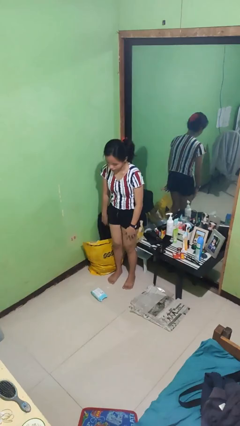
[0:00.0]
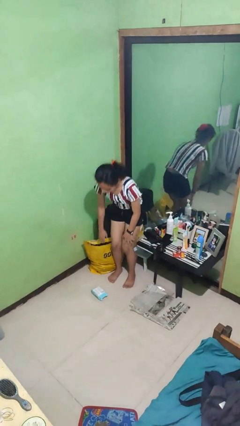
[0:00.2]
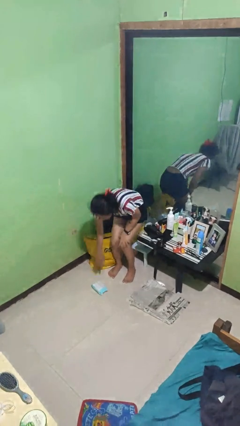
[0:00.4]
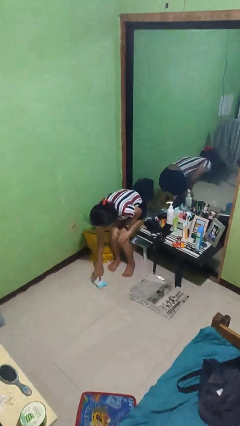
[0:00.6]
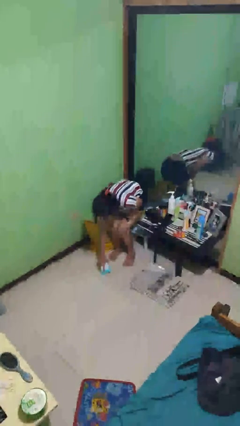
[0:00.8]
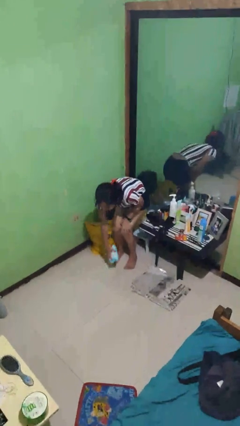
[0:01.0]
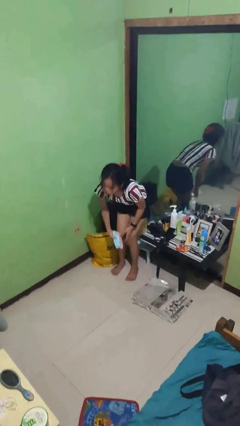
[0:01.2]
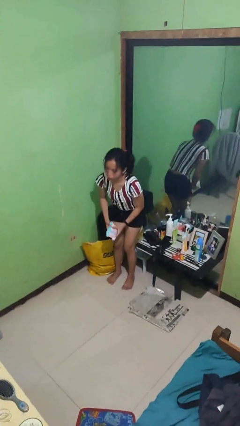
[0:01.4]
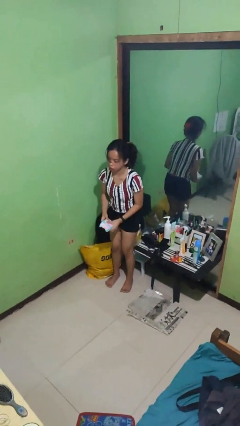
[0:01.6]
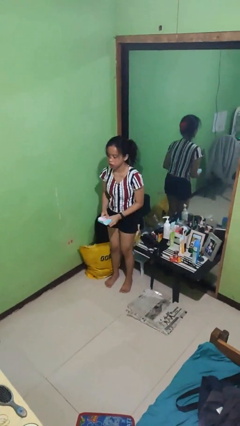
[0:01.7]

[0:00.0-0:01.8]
person picks up object from floor

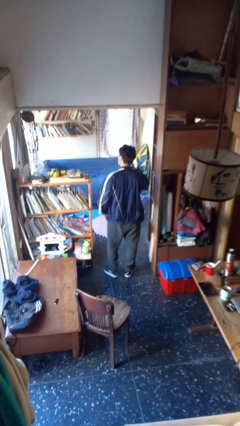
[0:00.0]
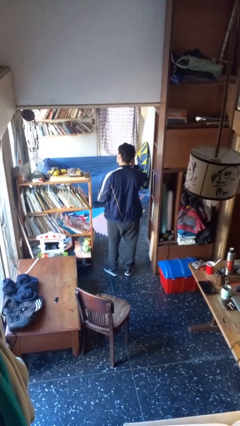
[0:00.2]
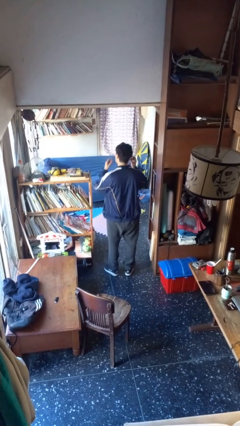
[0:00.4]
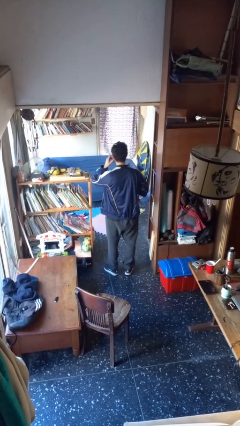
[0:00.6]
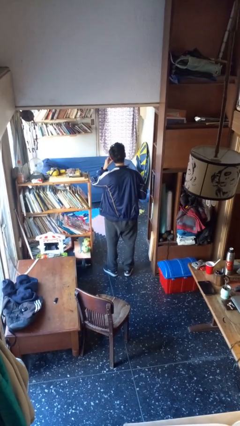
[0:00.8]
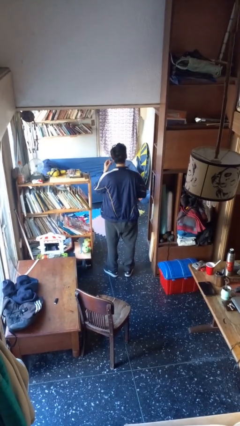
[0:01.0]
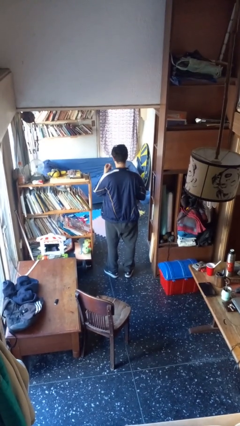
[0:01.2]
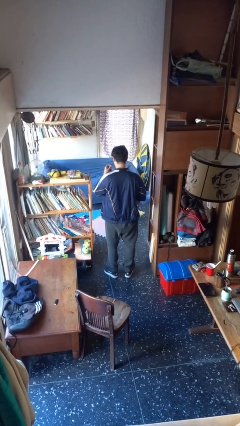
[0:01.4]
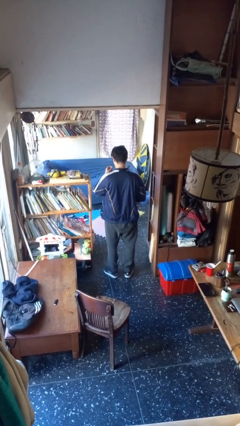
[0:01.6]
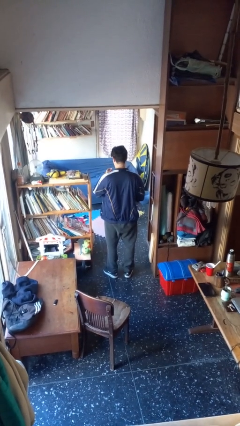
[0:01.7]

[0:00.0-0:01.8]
person takes off headphones

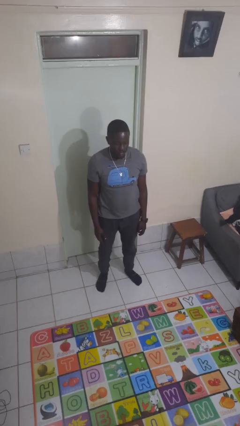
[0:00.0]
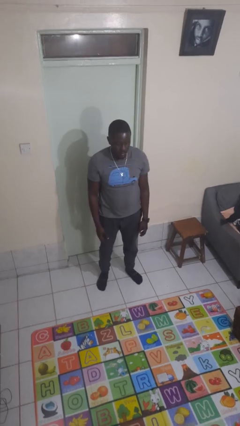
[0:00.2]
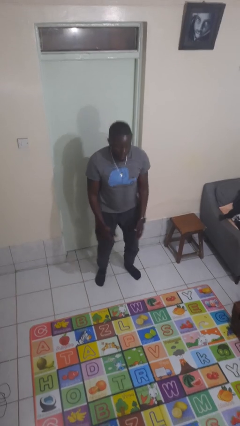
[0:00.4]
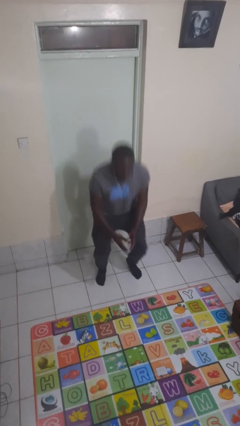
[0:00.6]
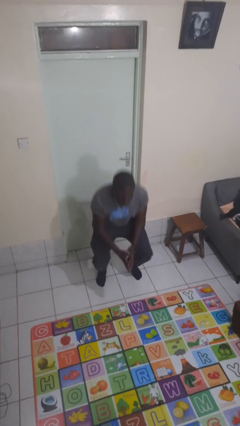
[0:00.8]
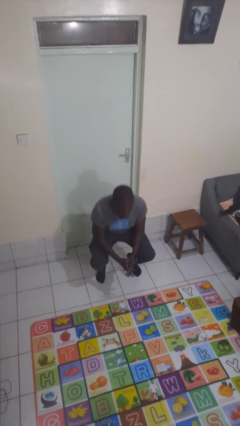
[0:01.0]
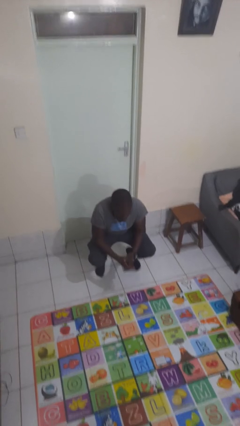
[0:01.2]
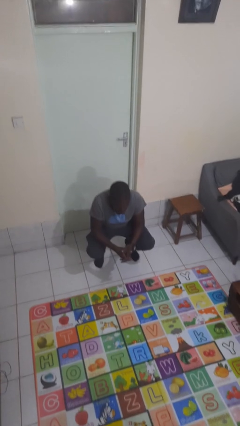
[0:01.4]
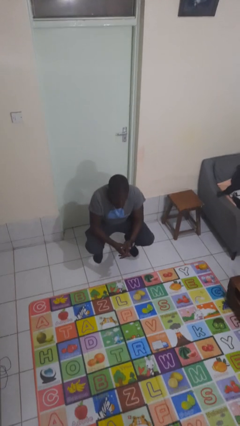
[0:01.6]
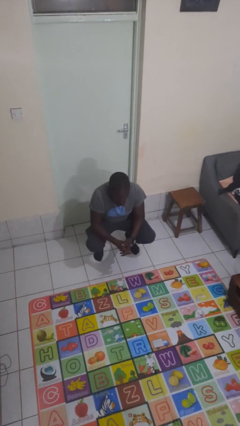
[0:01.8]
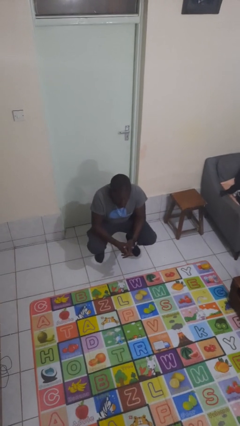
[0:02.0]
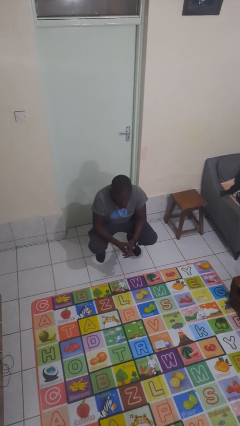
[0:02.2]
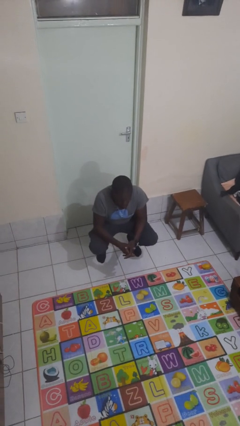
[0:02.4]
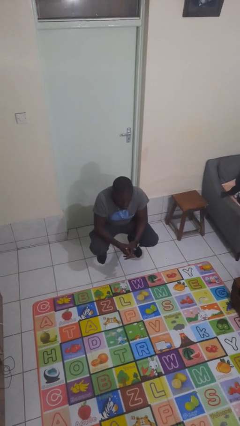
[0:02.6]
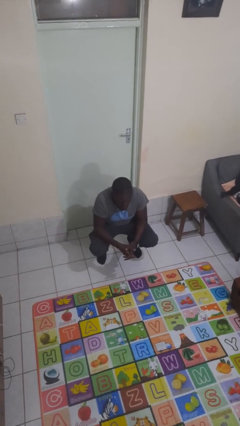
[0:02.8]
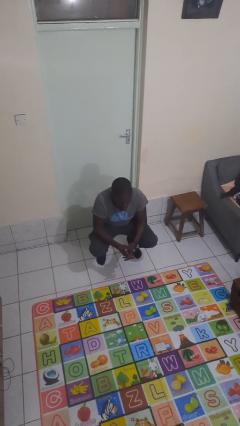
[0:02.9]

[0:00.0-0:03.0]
person squats

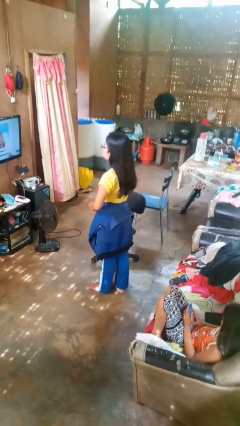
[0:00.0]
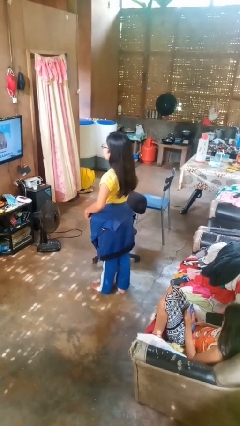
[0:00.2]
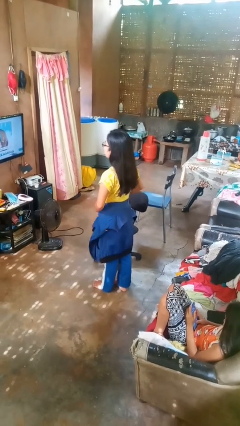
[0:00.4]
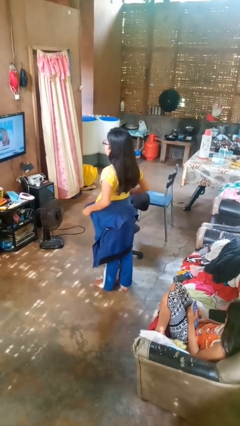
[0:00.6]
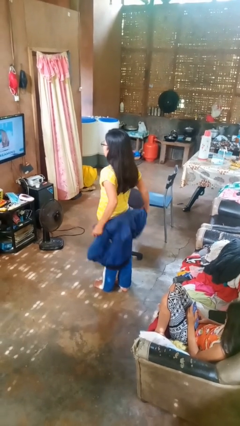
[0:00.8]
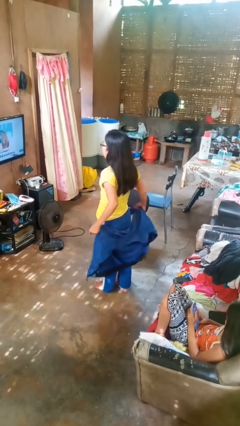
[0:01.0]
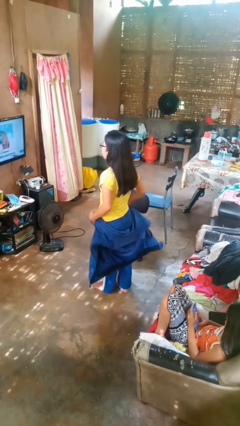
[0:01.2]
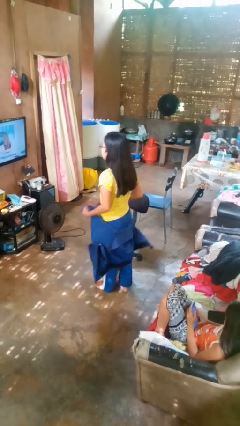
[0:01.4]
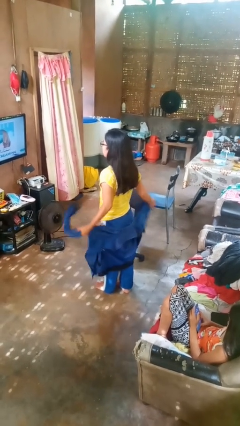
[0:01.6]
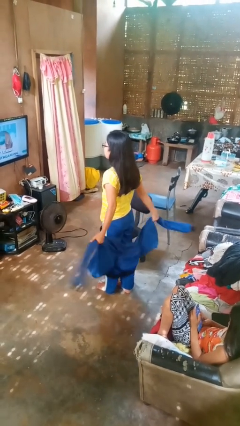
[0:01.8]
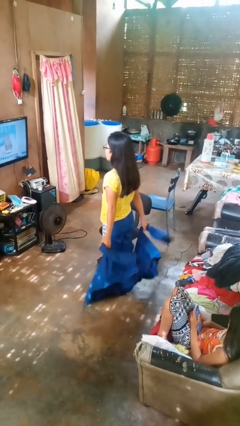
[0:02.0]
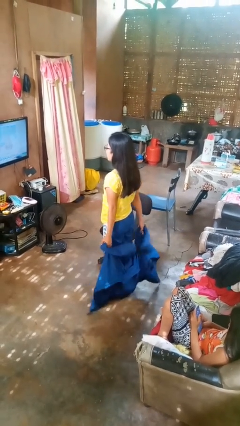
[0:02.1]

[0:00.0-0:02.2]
person unties jacket around waist

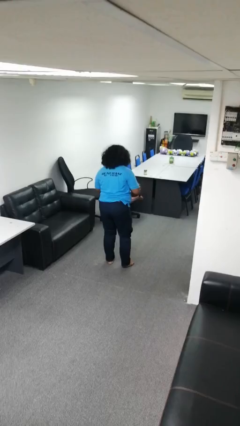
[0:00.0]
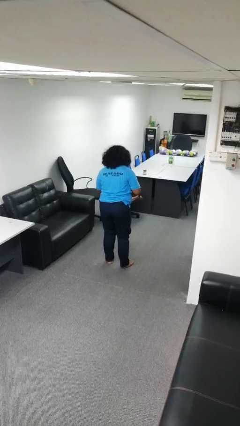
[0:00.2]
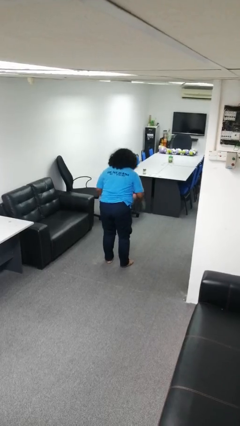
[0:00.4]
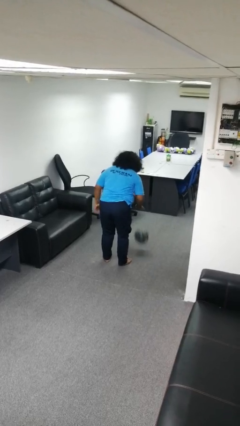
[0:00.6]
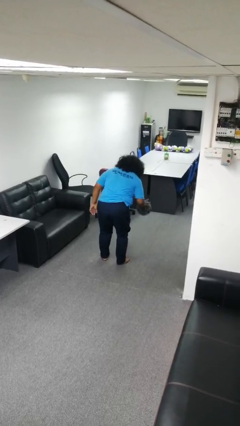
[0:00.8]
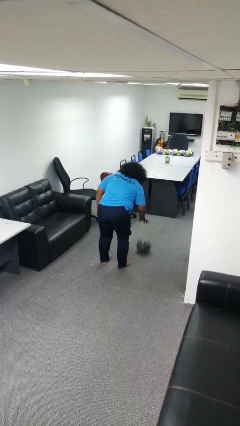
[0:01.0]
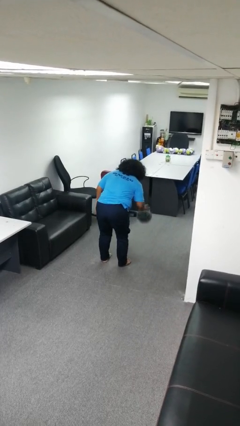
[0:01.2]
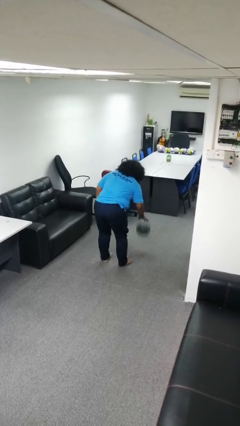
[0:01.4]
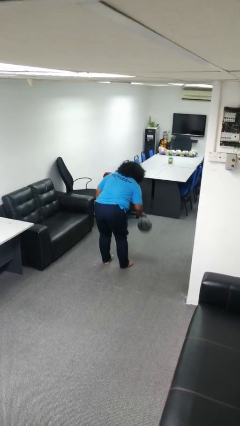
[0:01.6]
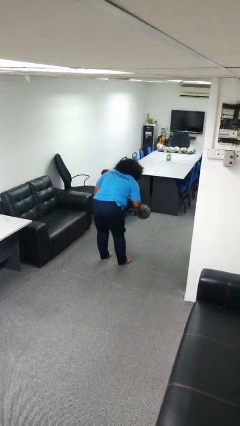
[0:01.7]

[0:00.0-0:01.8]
person bounces ball on floor

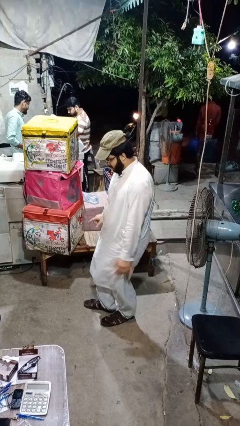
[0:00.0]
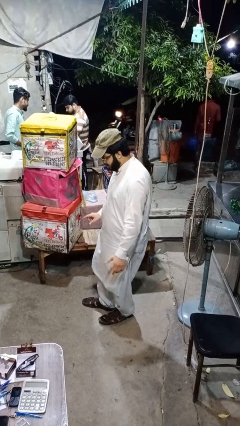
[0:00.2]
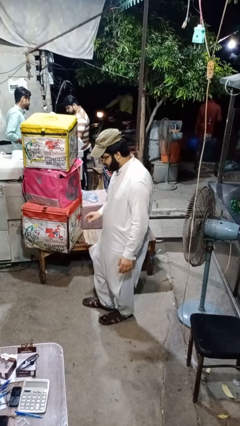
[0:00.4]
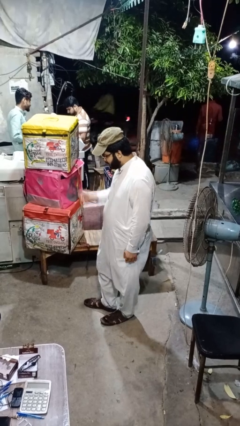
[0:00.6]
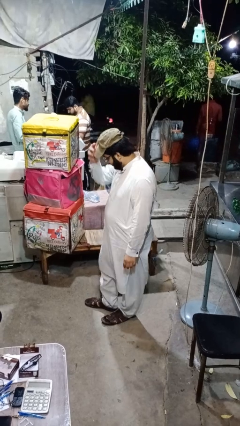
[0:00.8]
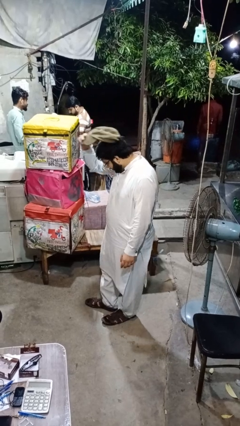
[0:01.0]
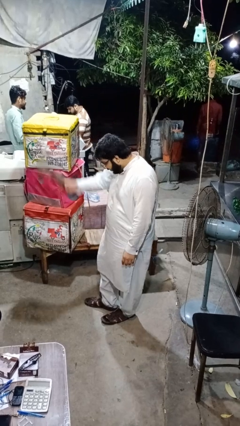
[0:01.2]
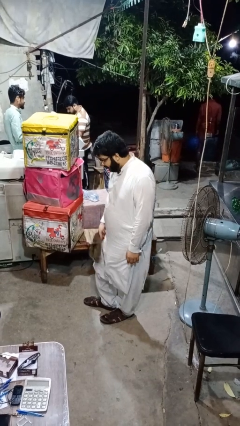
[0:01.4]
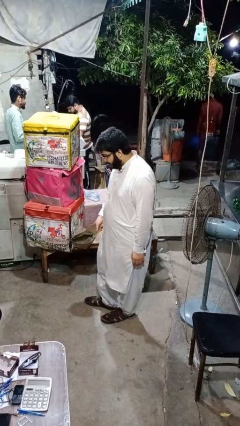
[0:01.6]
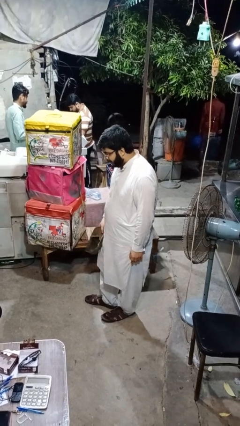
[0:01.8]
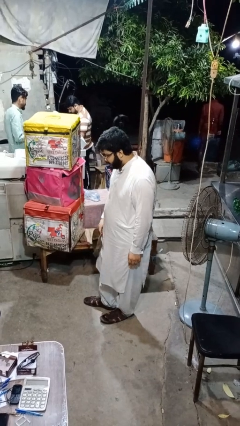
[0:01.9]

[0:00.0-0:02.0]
person takes off hat

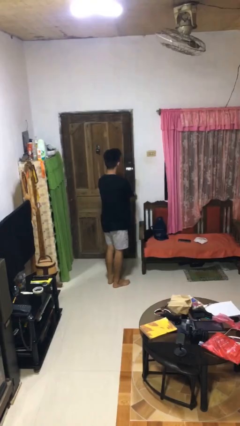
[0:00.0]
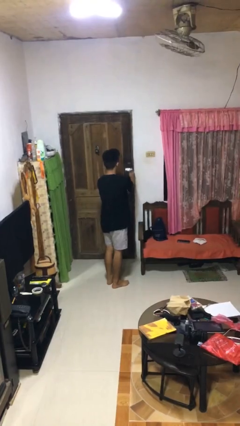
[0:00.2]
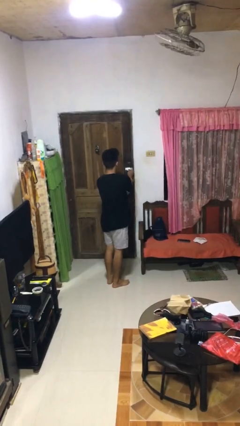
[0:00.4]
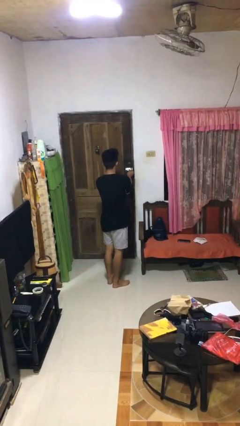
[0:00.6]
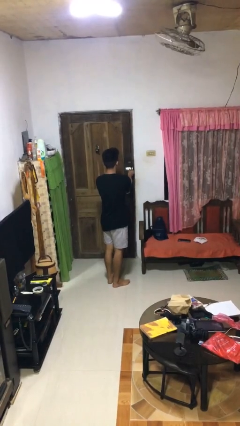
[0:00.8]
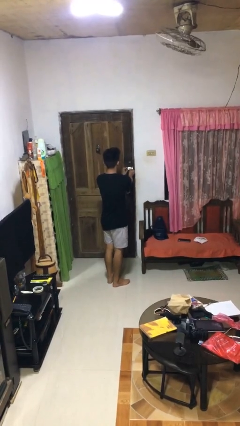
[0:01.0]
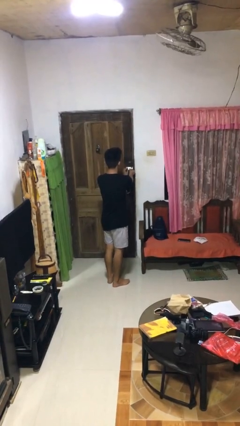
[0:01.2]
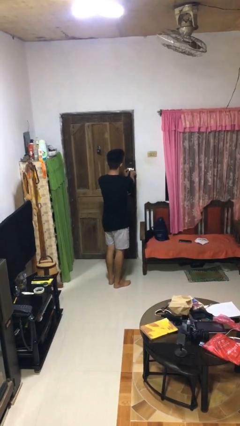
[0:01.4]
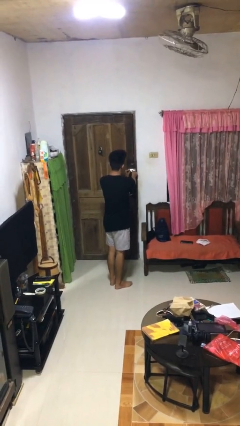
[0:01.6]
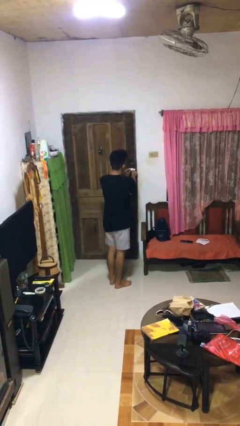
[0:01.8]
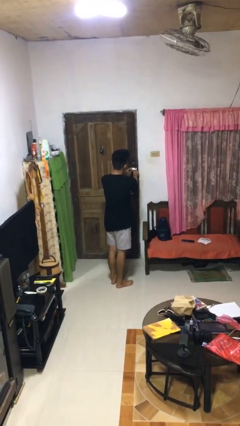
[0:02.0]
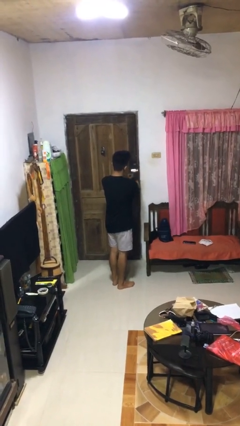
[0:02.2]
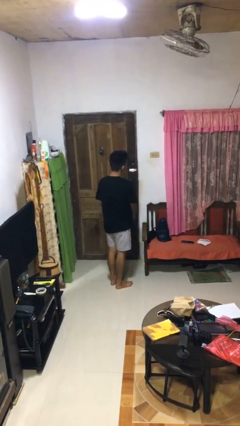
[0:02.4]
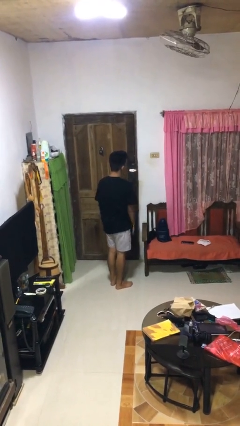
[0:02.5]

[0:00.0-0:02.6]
person locks door with keys

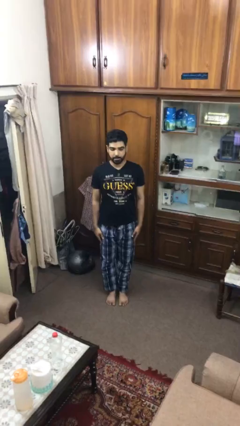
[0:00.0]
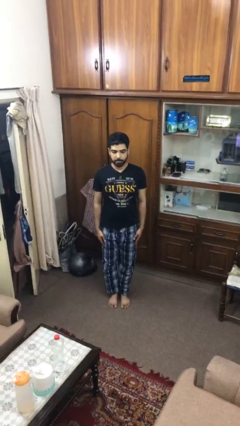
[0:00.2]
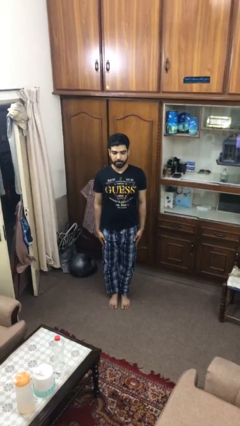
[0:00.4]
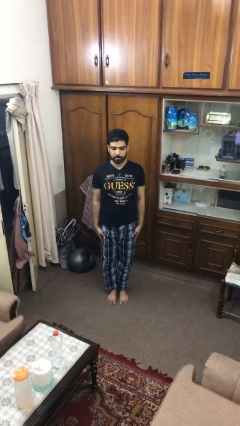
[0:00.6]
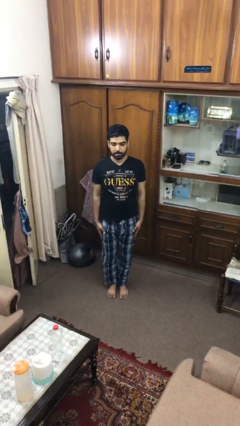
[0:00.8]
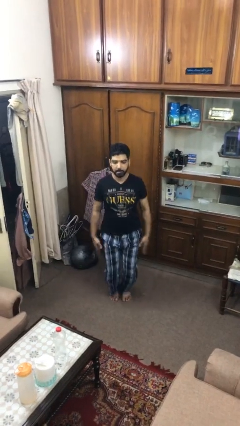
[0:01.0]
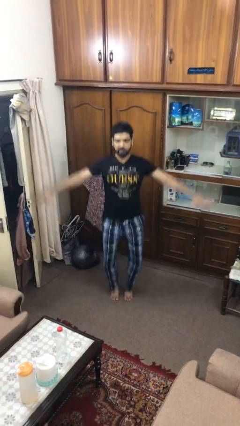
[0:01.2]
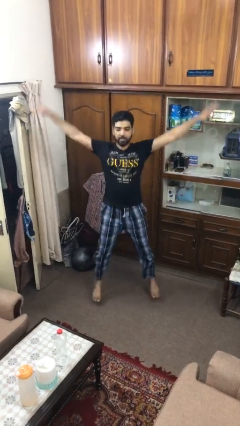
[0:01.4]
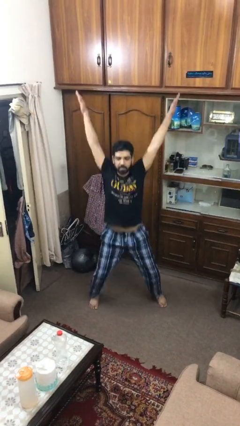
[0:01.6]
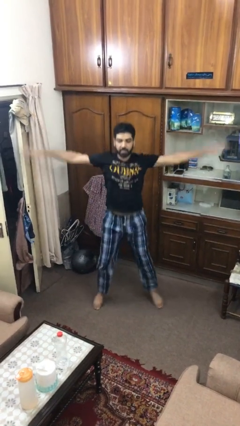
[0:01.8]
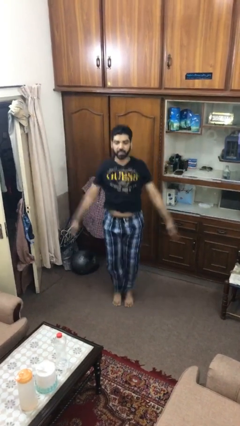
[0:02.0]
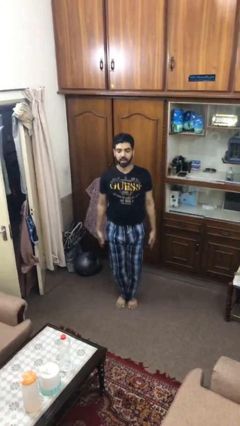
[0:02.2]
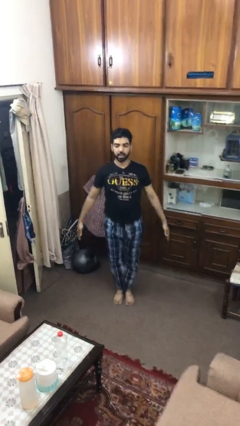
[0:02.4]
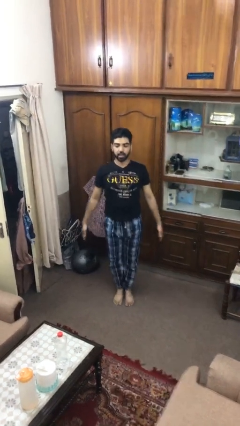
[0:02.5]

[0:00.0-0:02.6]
person exercises with jumping jacks
